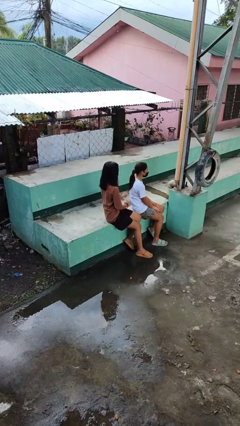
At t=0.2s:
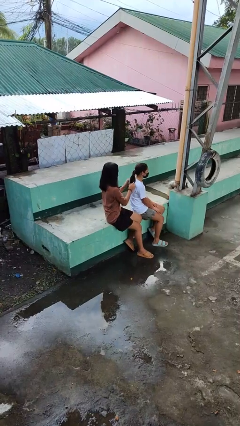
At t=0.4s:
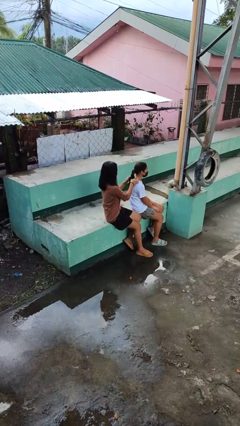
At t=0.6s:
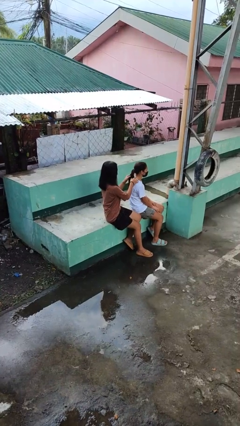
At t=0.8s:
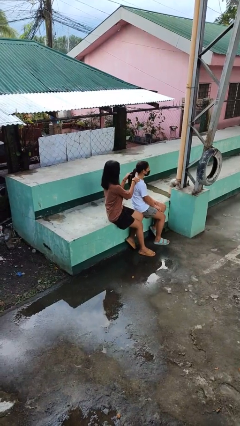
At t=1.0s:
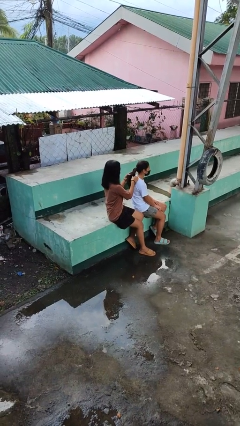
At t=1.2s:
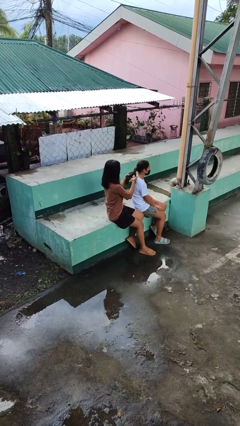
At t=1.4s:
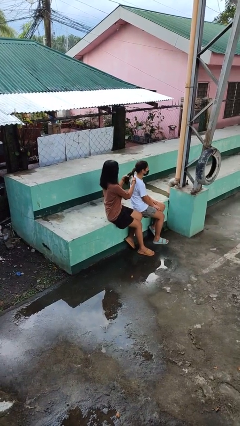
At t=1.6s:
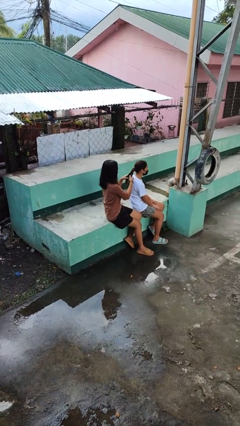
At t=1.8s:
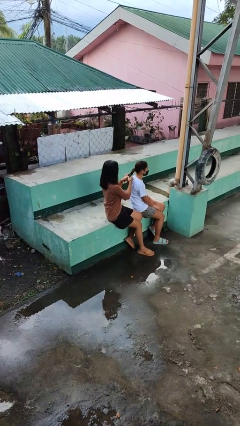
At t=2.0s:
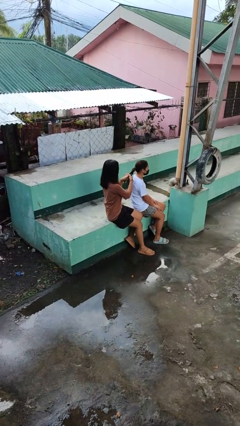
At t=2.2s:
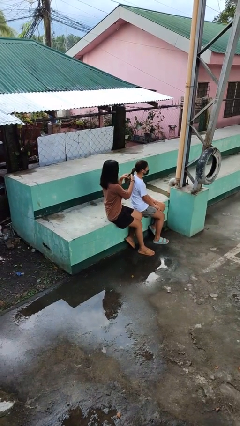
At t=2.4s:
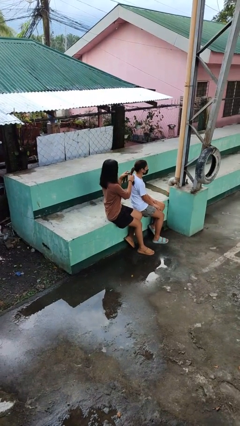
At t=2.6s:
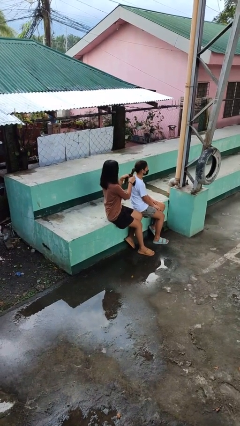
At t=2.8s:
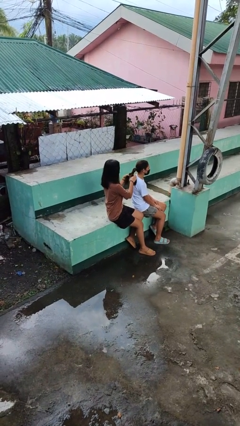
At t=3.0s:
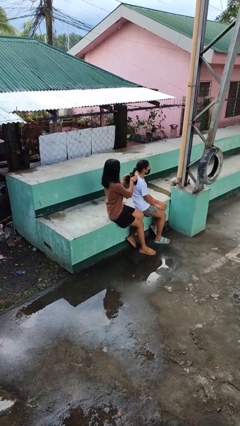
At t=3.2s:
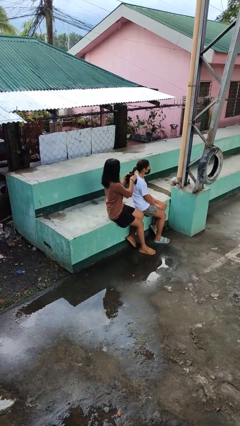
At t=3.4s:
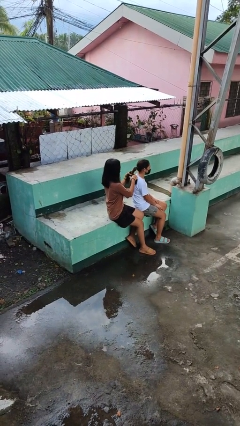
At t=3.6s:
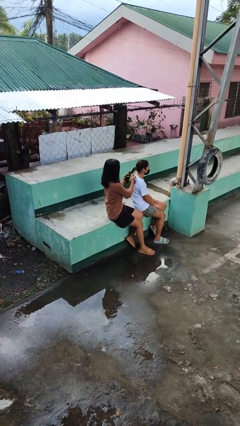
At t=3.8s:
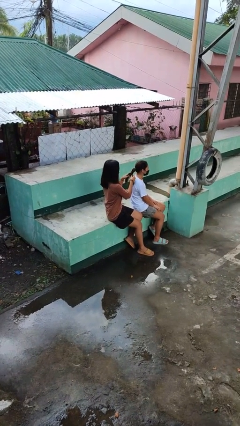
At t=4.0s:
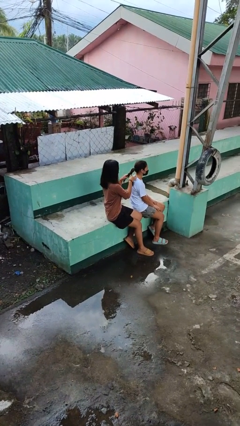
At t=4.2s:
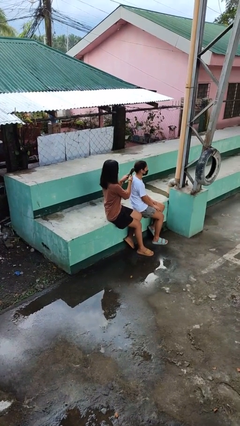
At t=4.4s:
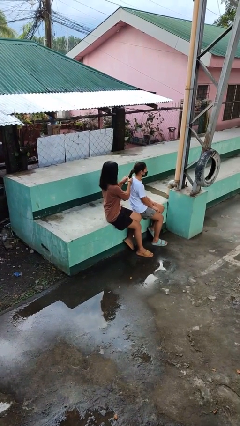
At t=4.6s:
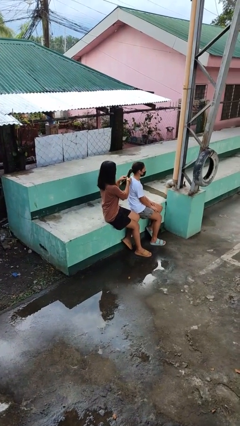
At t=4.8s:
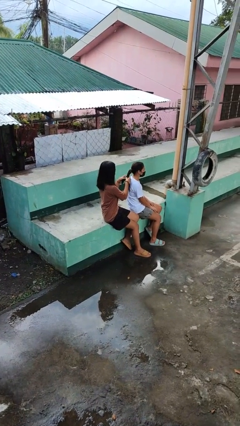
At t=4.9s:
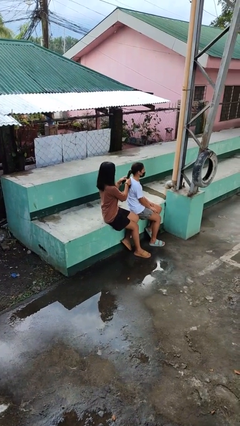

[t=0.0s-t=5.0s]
person braids hair of person

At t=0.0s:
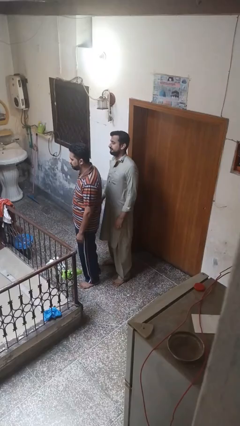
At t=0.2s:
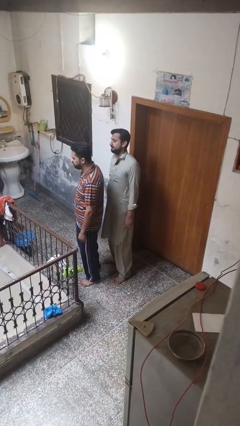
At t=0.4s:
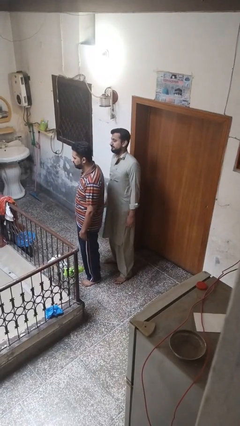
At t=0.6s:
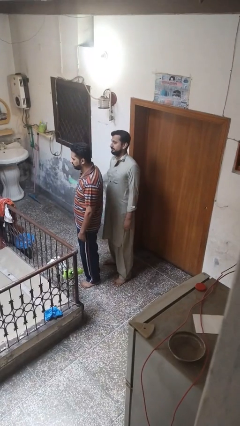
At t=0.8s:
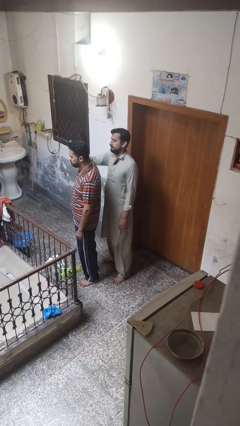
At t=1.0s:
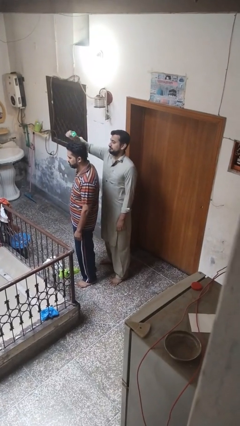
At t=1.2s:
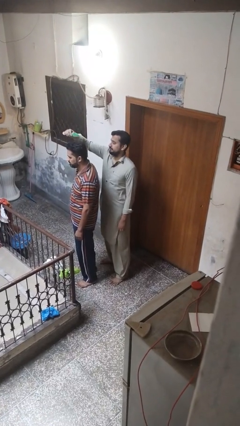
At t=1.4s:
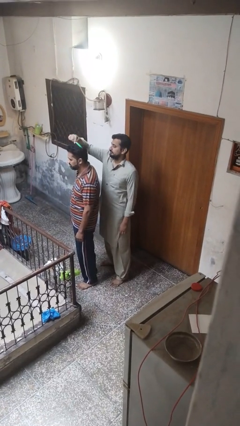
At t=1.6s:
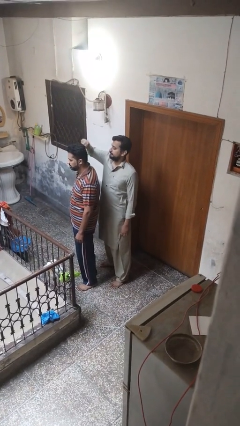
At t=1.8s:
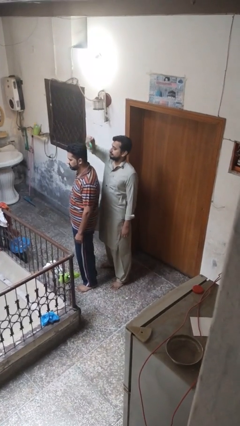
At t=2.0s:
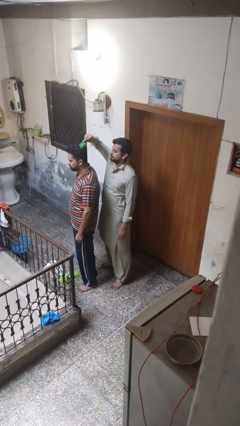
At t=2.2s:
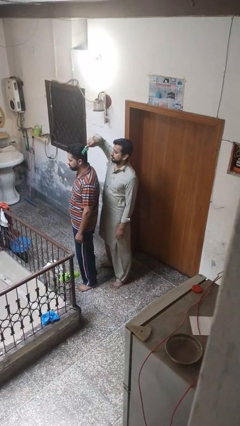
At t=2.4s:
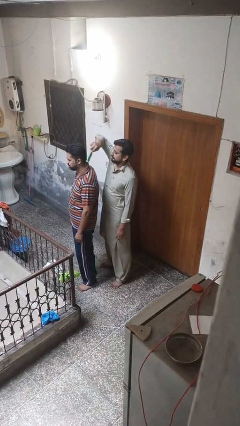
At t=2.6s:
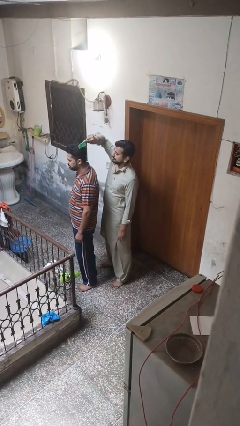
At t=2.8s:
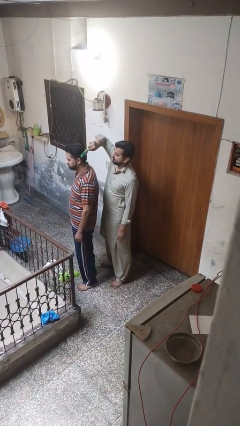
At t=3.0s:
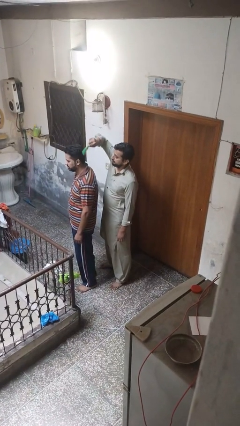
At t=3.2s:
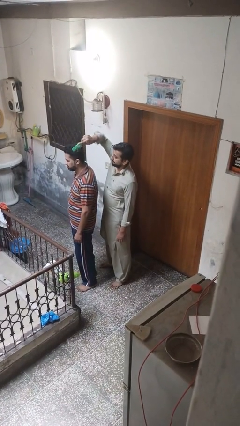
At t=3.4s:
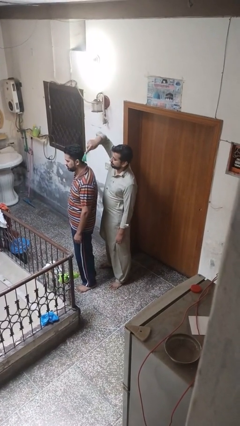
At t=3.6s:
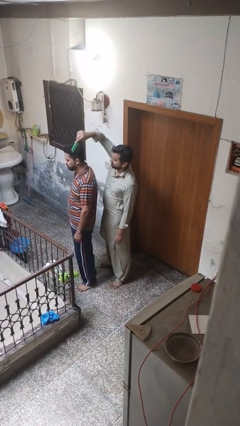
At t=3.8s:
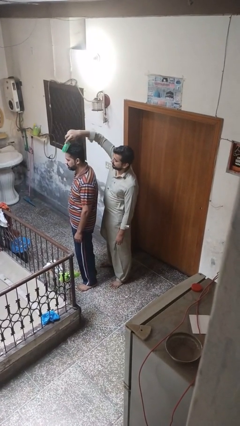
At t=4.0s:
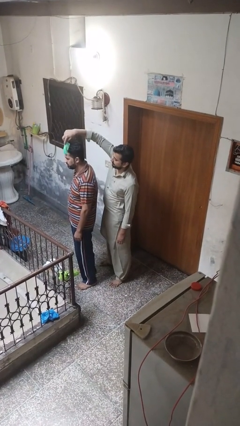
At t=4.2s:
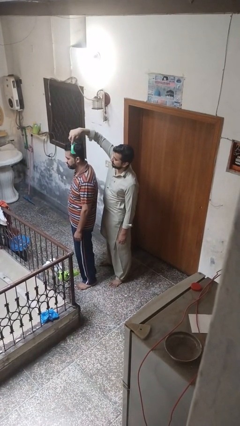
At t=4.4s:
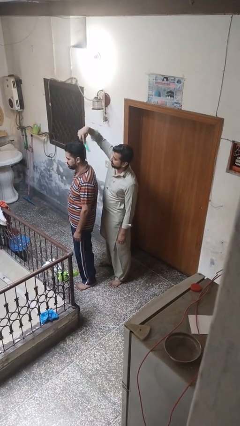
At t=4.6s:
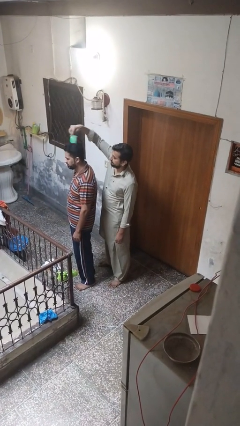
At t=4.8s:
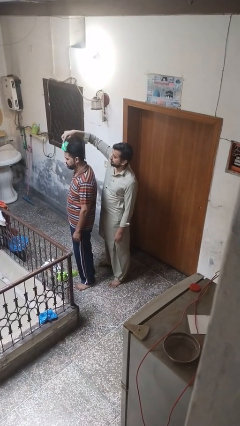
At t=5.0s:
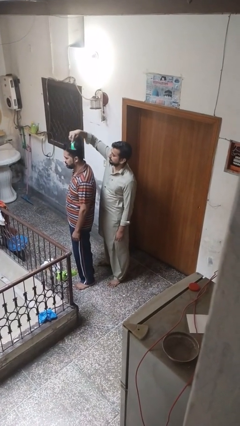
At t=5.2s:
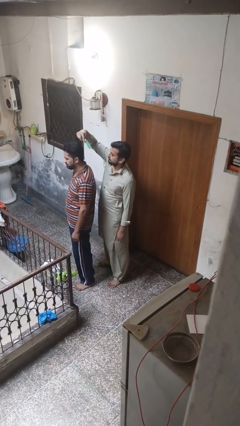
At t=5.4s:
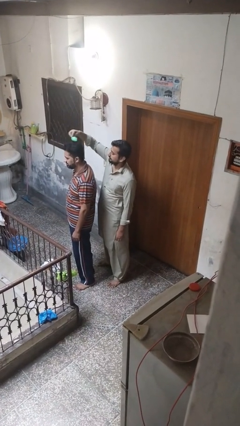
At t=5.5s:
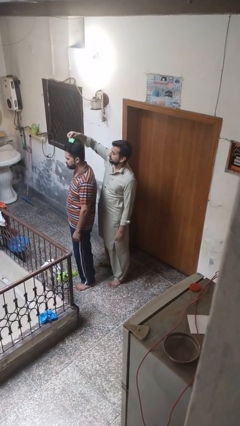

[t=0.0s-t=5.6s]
person brushes hair of person

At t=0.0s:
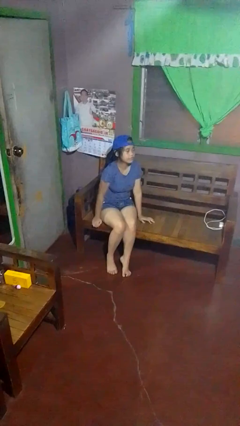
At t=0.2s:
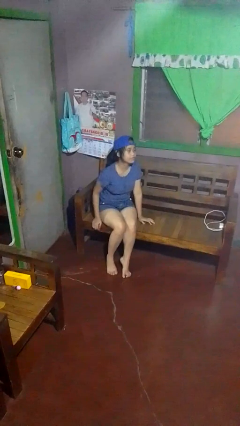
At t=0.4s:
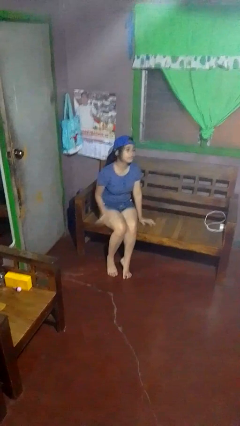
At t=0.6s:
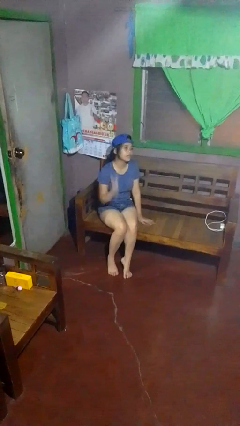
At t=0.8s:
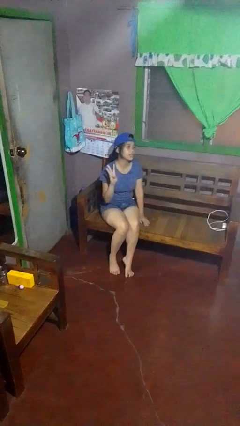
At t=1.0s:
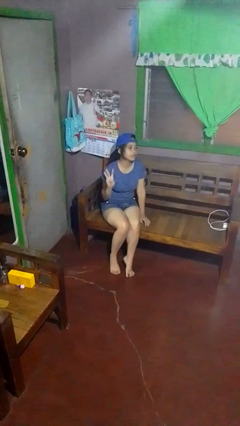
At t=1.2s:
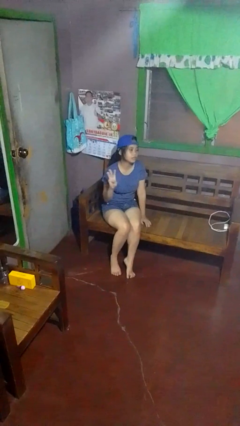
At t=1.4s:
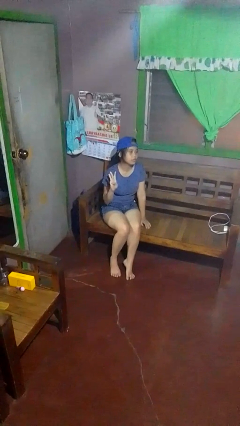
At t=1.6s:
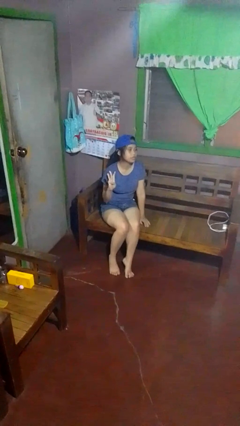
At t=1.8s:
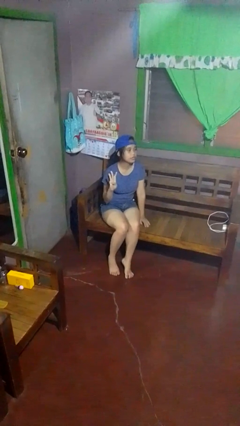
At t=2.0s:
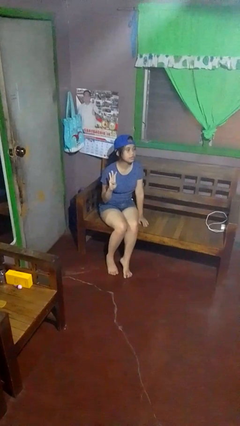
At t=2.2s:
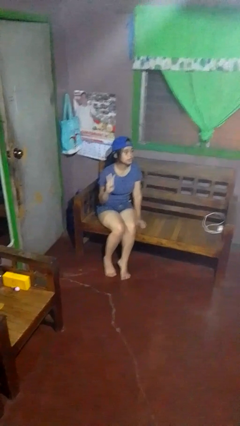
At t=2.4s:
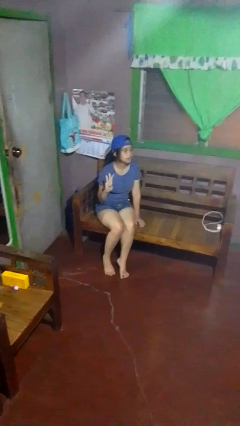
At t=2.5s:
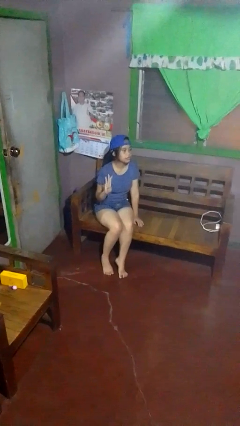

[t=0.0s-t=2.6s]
person gestures number three

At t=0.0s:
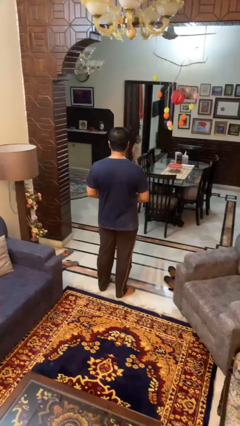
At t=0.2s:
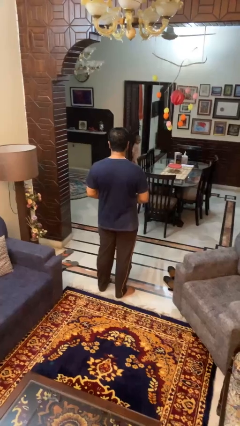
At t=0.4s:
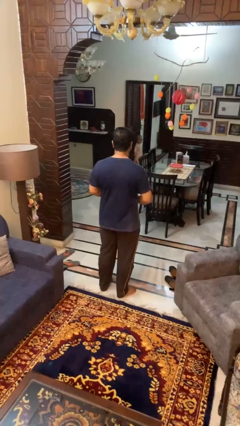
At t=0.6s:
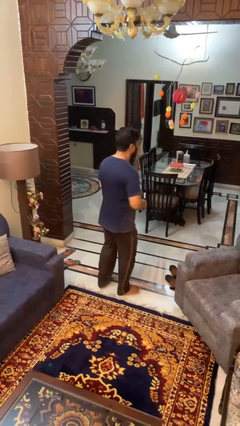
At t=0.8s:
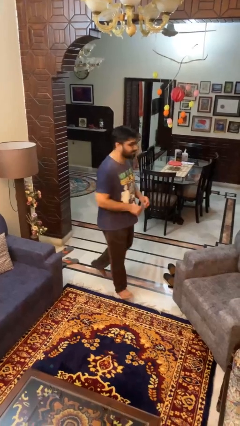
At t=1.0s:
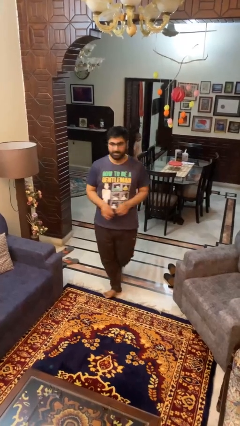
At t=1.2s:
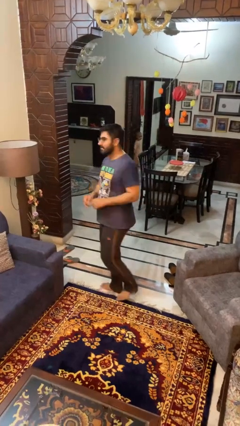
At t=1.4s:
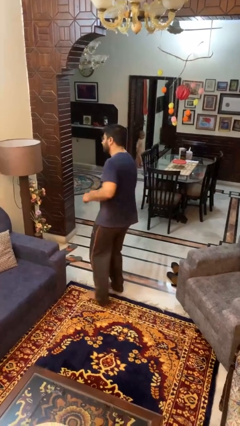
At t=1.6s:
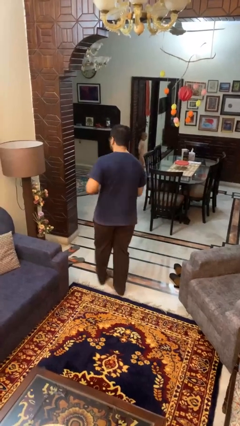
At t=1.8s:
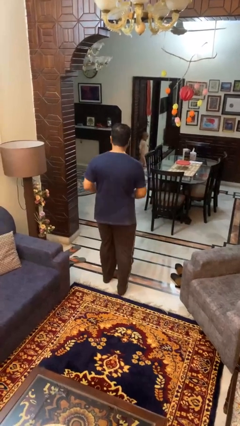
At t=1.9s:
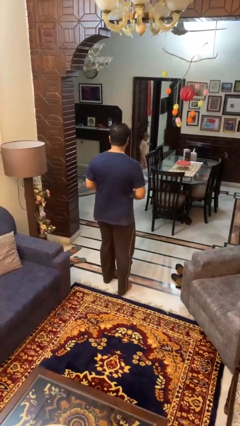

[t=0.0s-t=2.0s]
person twirls

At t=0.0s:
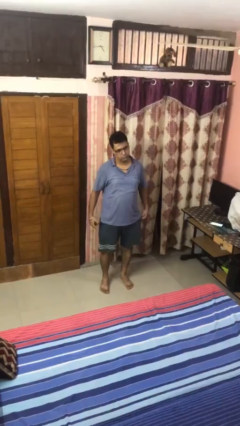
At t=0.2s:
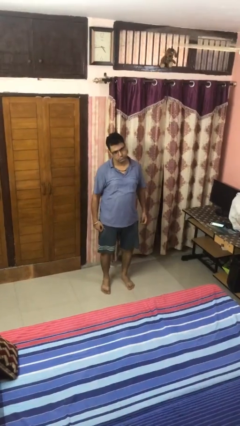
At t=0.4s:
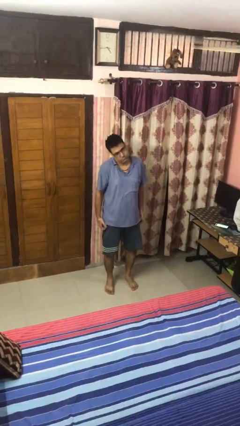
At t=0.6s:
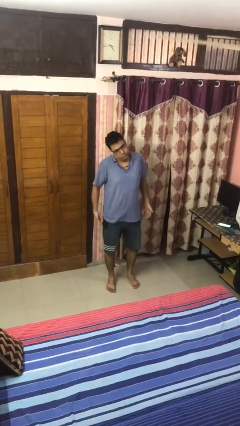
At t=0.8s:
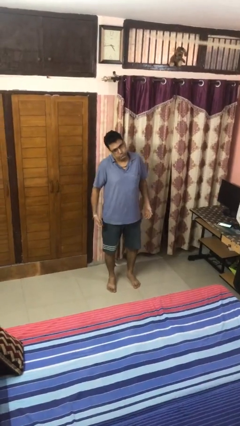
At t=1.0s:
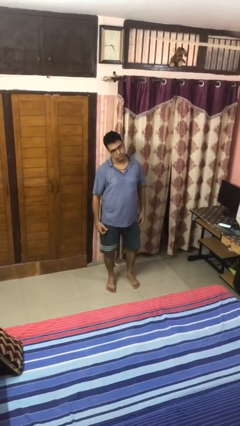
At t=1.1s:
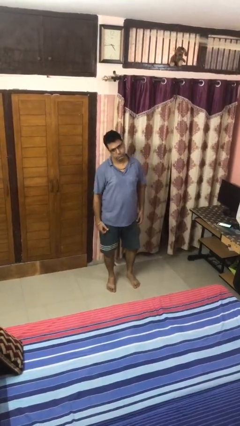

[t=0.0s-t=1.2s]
person shrugs

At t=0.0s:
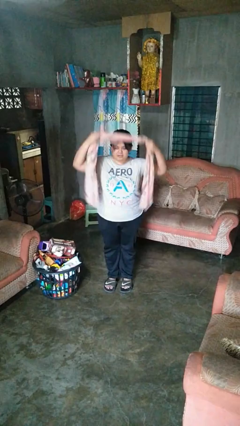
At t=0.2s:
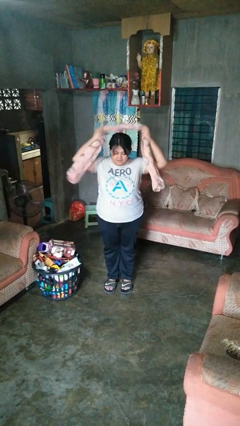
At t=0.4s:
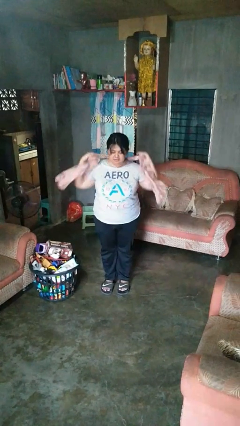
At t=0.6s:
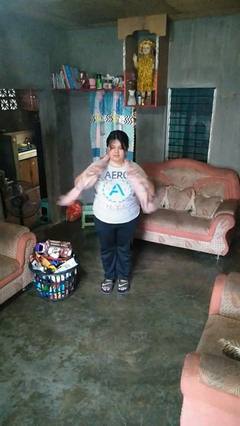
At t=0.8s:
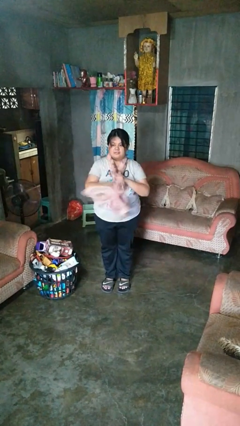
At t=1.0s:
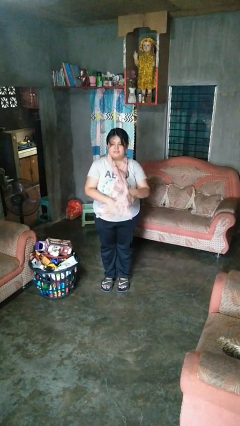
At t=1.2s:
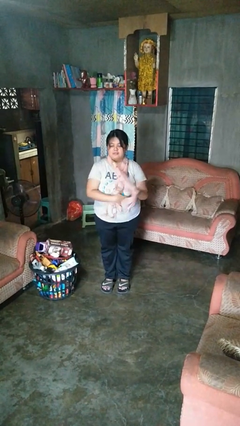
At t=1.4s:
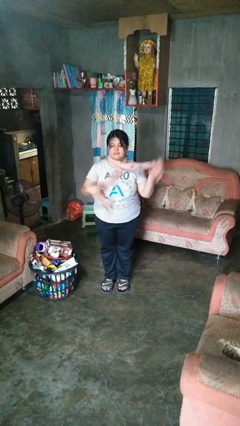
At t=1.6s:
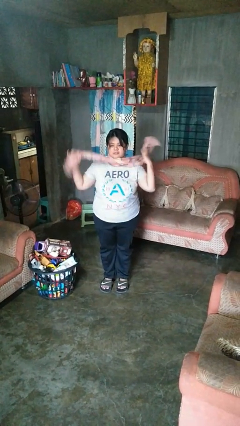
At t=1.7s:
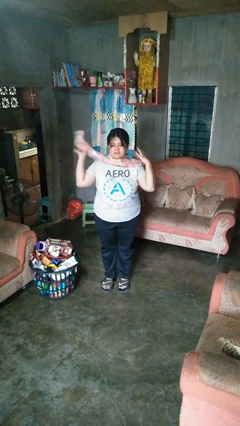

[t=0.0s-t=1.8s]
person puts on scarf
